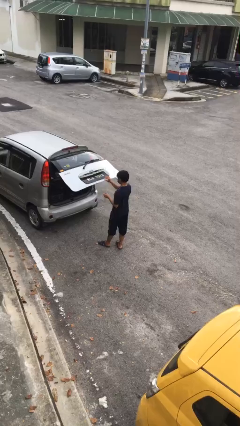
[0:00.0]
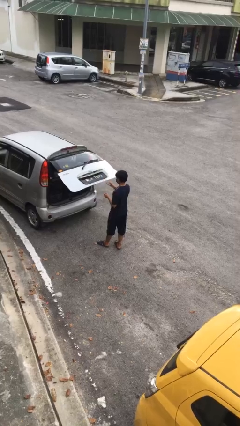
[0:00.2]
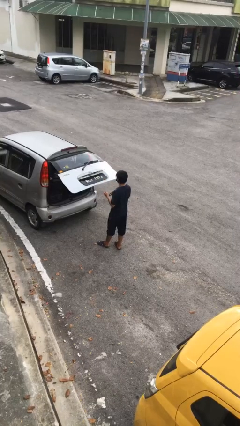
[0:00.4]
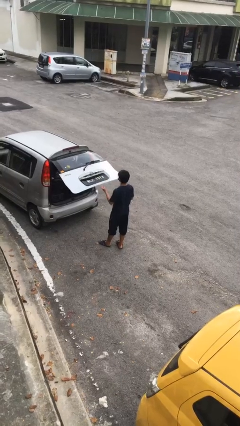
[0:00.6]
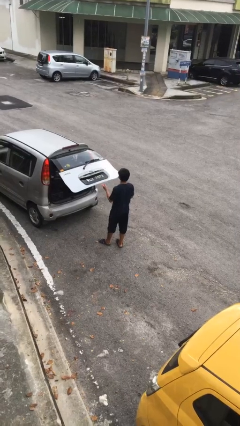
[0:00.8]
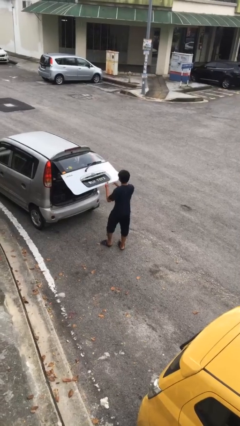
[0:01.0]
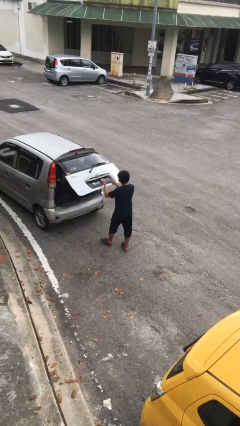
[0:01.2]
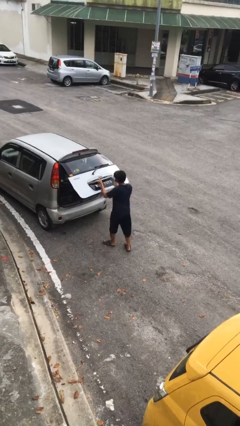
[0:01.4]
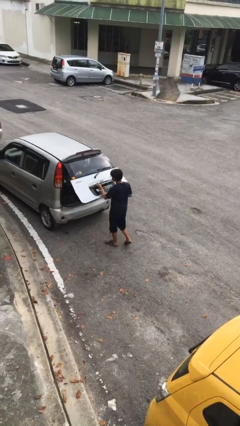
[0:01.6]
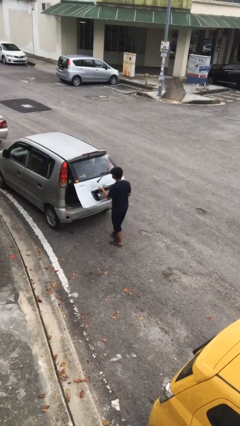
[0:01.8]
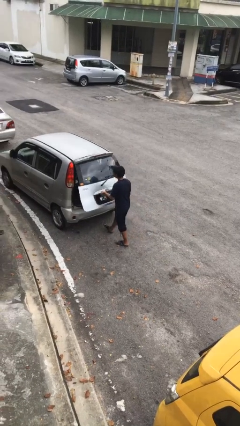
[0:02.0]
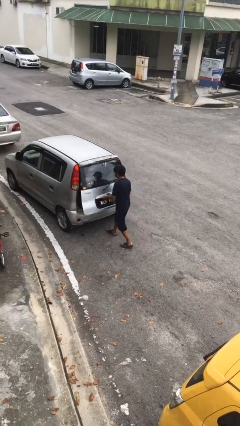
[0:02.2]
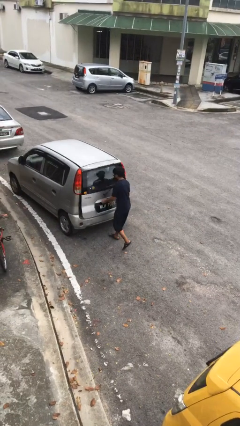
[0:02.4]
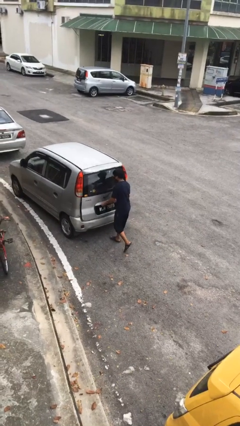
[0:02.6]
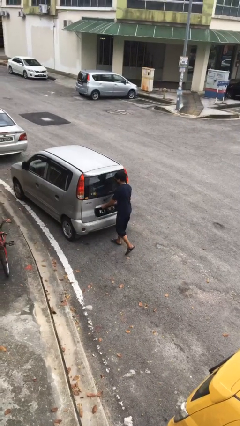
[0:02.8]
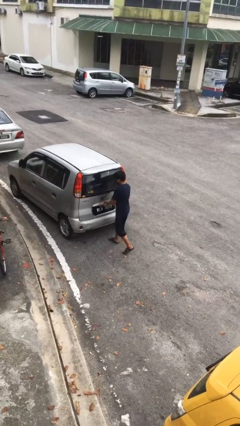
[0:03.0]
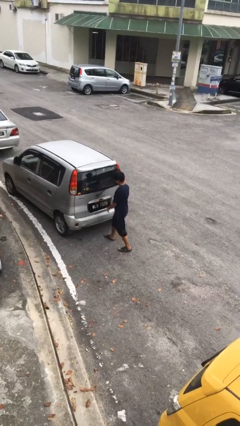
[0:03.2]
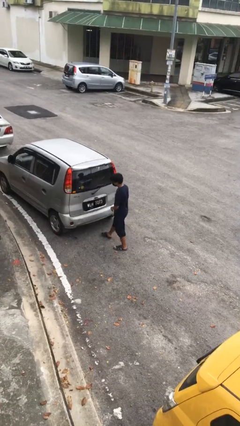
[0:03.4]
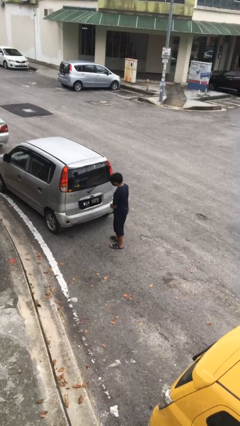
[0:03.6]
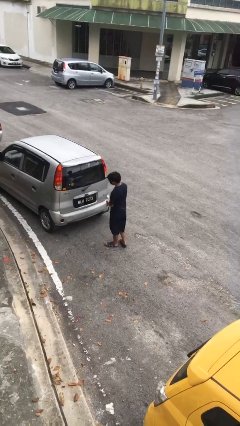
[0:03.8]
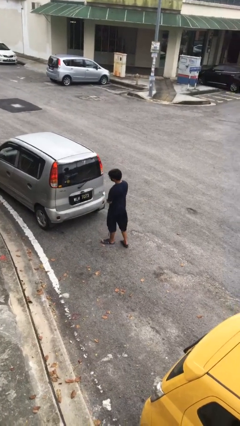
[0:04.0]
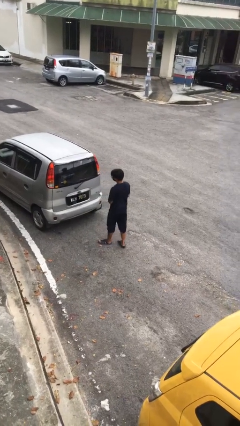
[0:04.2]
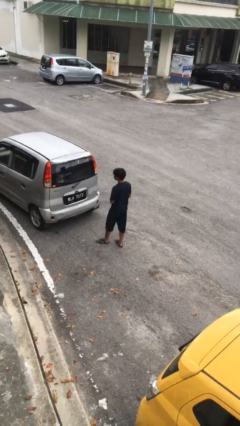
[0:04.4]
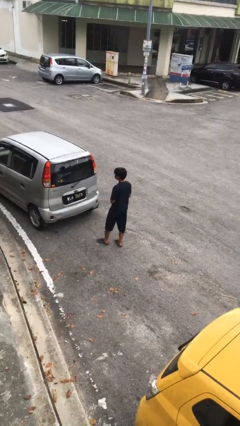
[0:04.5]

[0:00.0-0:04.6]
person closes car trunk

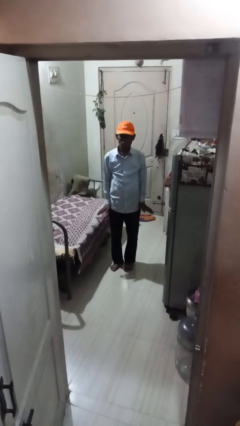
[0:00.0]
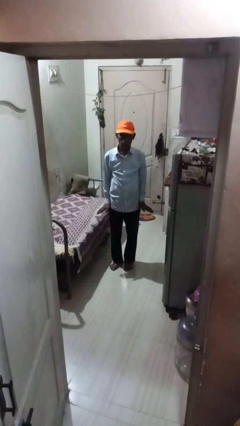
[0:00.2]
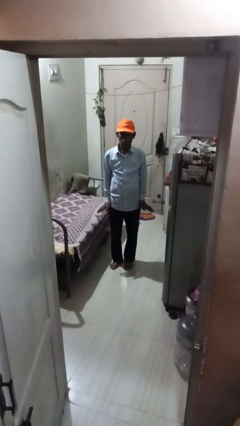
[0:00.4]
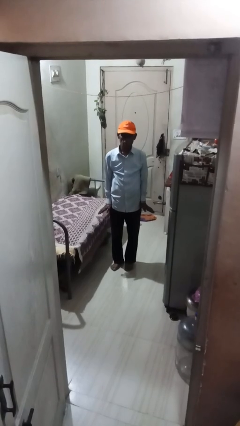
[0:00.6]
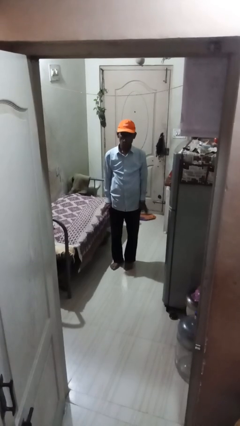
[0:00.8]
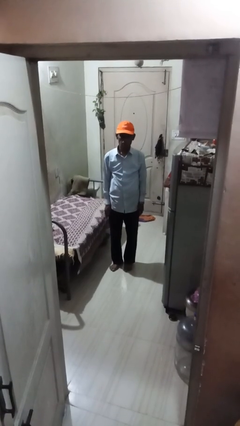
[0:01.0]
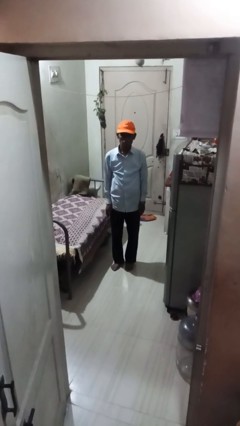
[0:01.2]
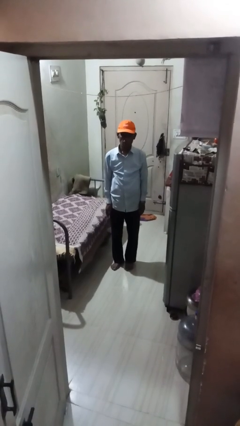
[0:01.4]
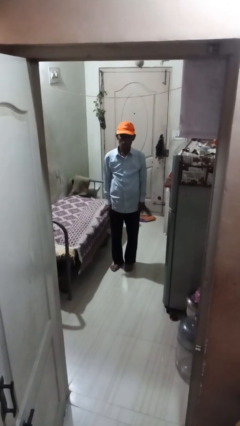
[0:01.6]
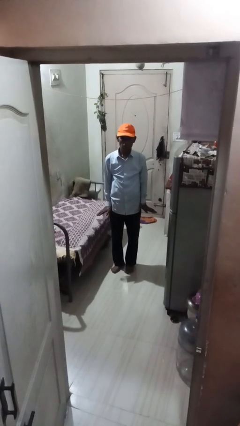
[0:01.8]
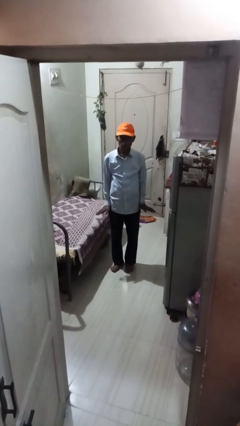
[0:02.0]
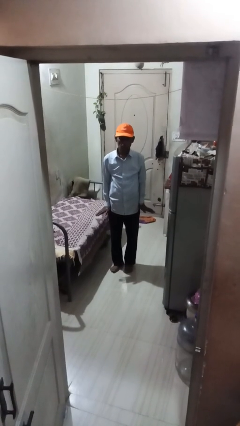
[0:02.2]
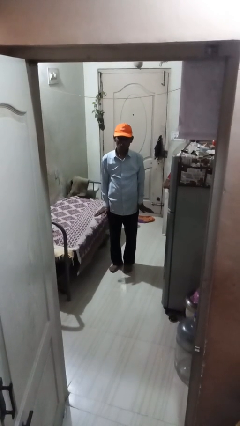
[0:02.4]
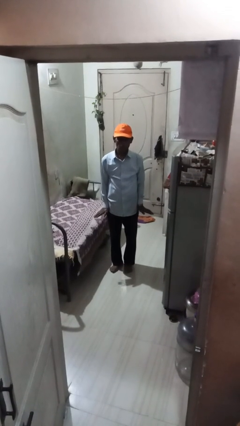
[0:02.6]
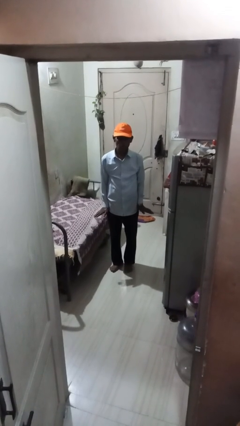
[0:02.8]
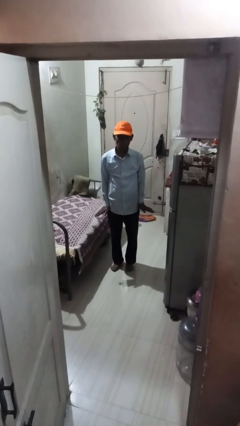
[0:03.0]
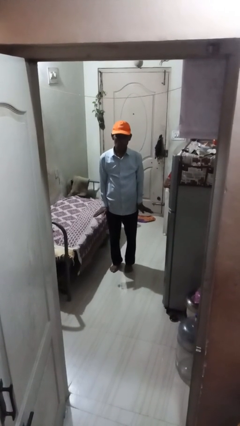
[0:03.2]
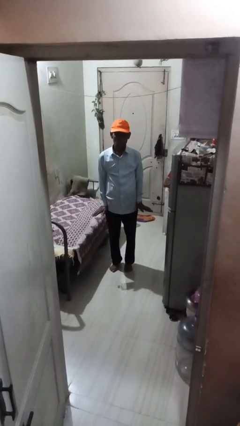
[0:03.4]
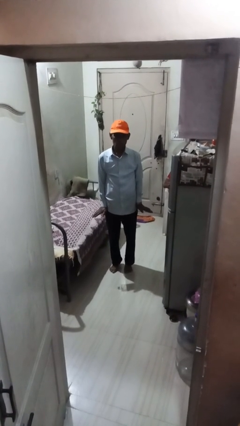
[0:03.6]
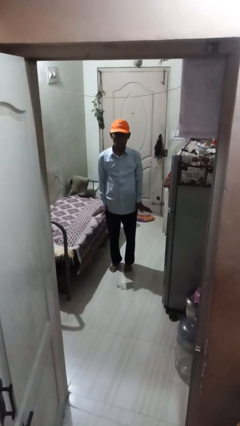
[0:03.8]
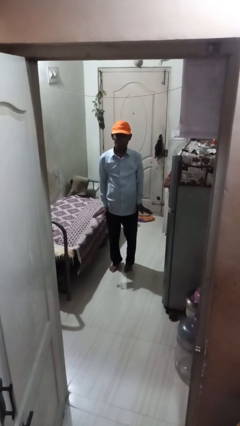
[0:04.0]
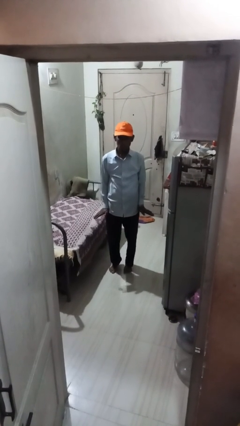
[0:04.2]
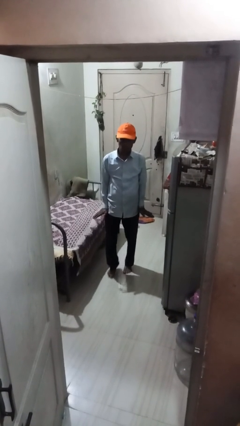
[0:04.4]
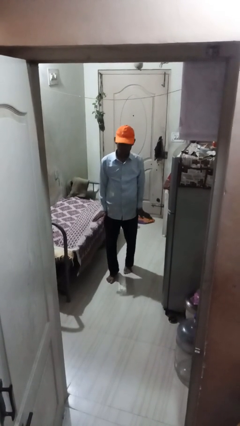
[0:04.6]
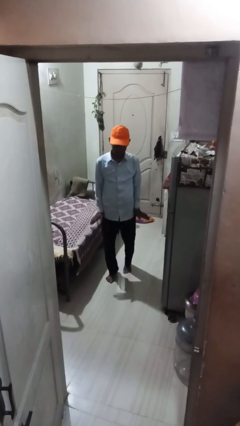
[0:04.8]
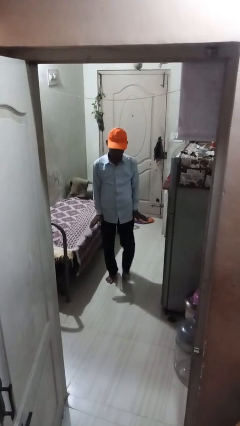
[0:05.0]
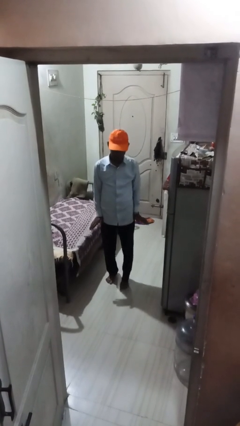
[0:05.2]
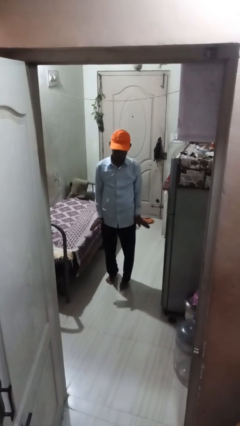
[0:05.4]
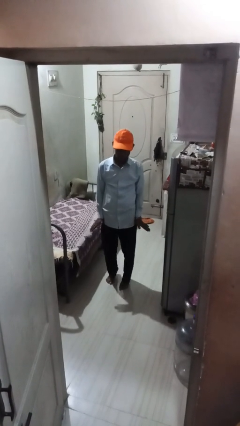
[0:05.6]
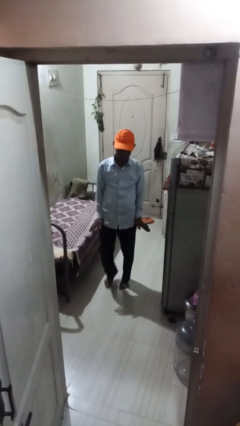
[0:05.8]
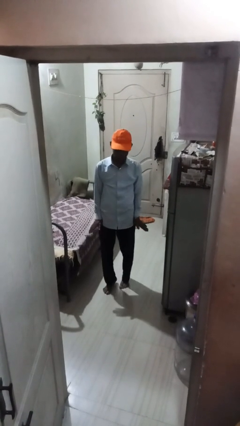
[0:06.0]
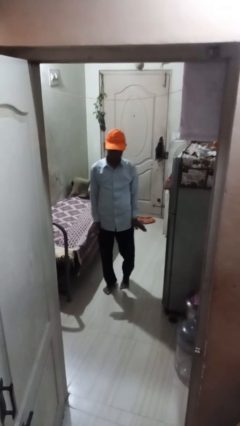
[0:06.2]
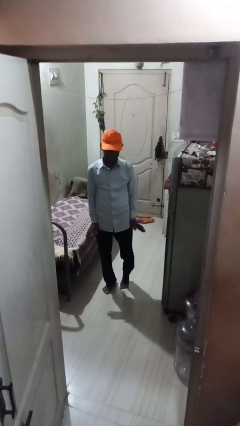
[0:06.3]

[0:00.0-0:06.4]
person walks tiptoe

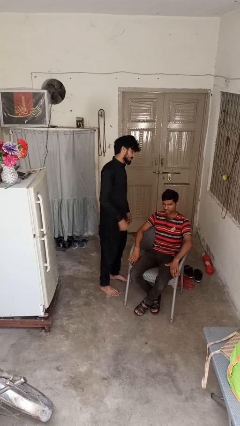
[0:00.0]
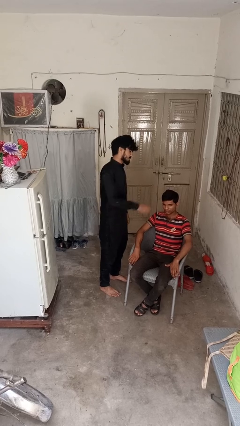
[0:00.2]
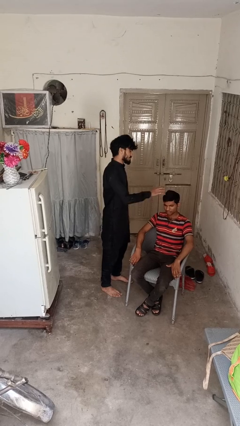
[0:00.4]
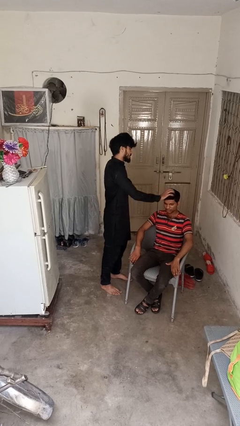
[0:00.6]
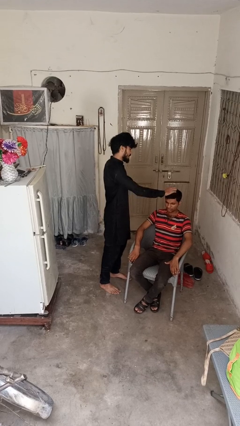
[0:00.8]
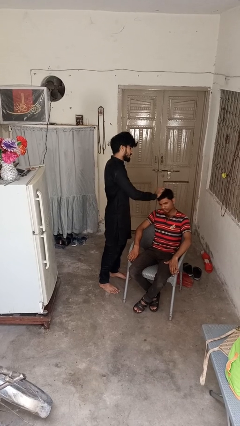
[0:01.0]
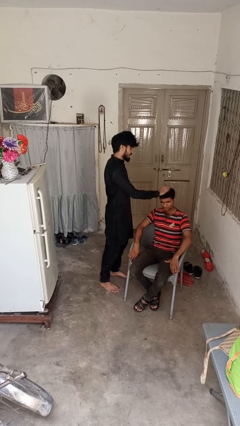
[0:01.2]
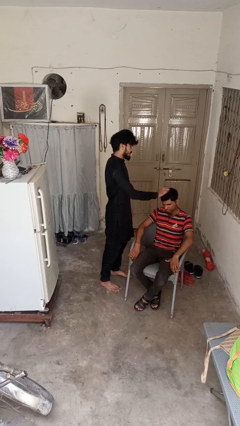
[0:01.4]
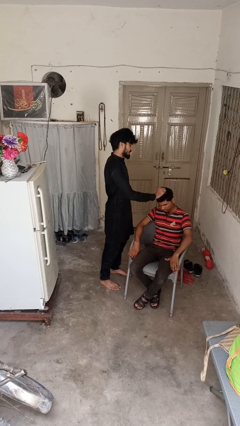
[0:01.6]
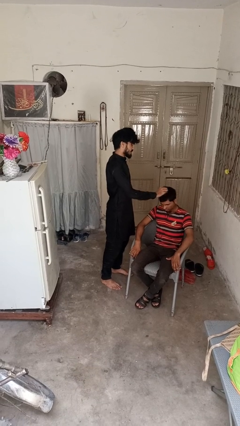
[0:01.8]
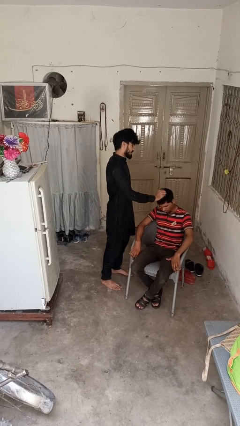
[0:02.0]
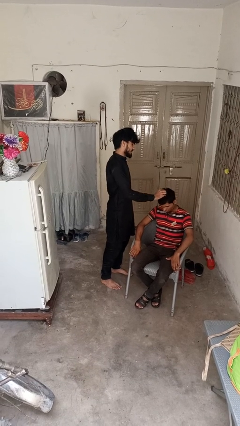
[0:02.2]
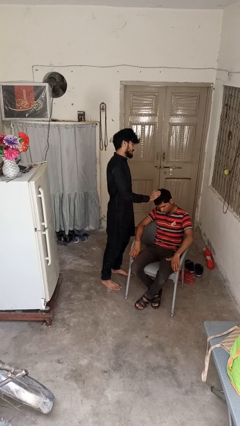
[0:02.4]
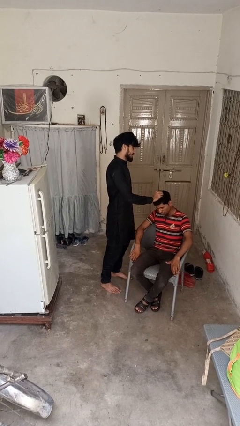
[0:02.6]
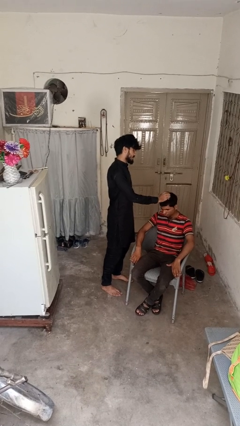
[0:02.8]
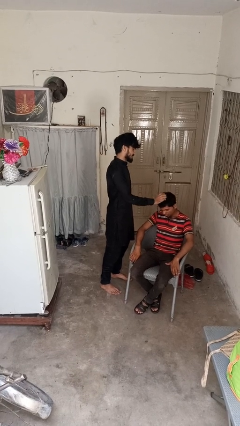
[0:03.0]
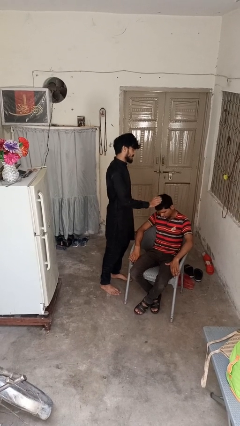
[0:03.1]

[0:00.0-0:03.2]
person grabs person by hair

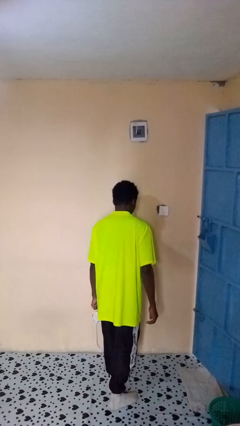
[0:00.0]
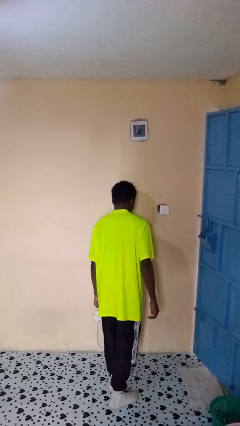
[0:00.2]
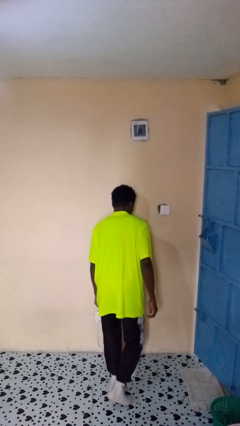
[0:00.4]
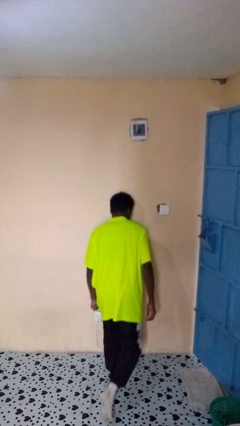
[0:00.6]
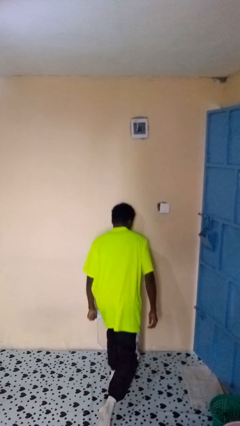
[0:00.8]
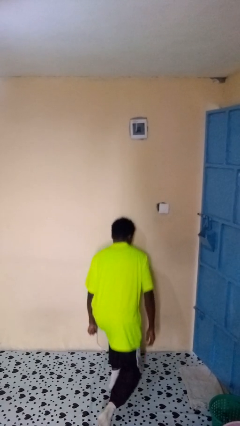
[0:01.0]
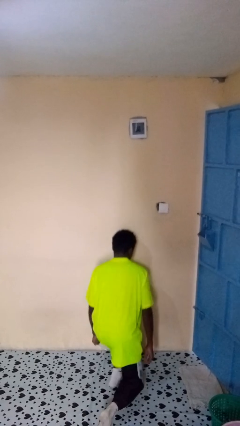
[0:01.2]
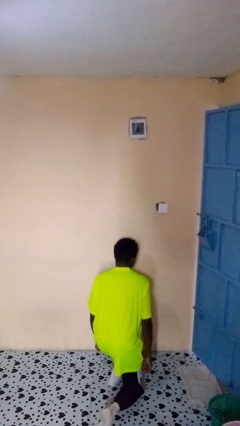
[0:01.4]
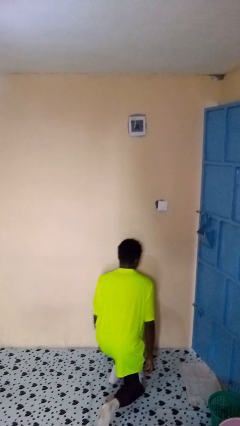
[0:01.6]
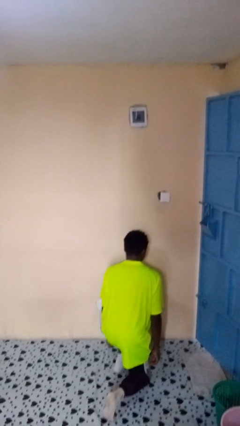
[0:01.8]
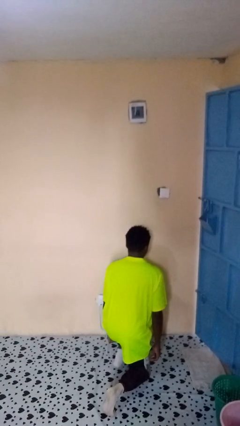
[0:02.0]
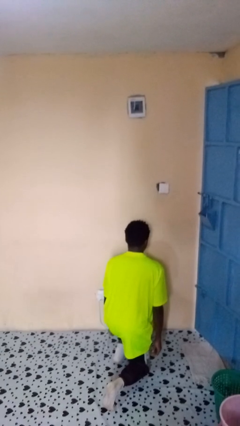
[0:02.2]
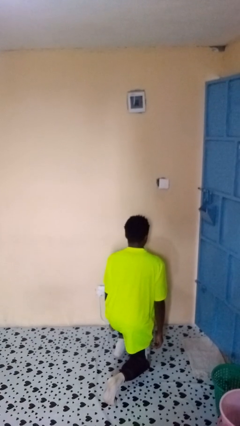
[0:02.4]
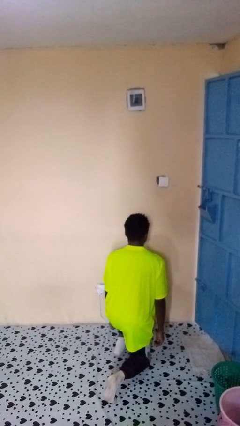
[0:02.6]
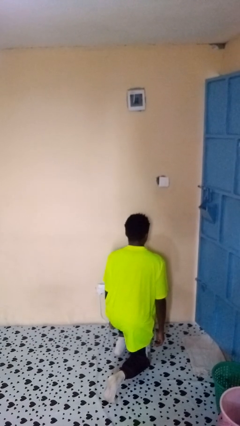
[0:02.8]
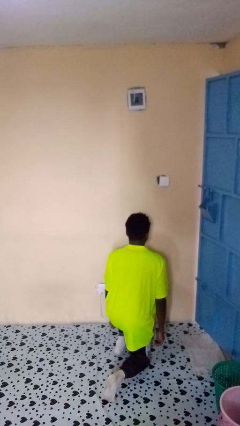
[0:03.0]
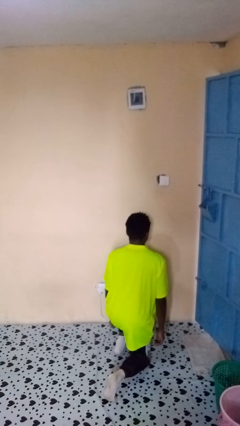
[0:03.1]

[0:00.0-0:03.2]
person kneels

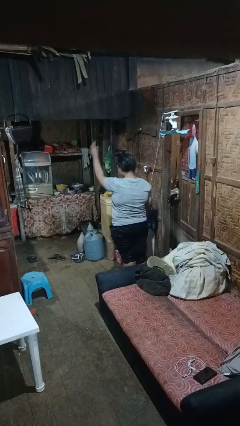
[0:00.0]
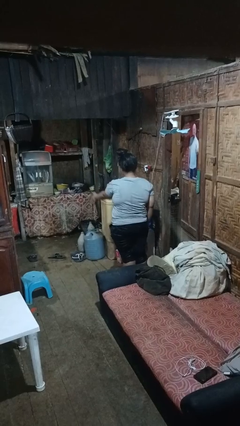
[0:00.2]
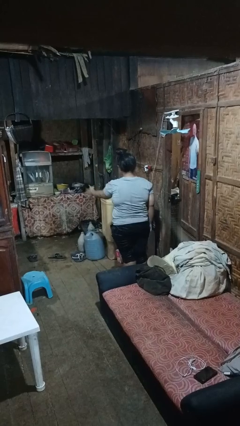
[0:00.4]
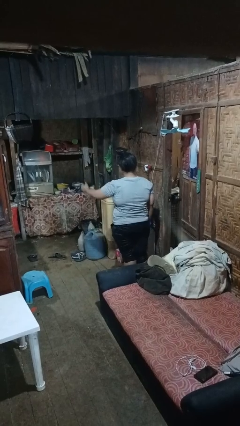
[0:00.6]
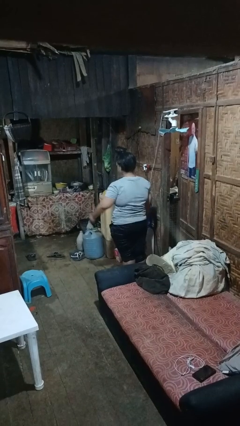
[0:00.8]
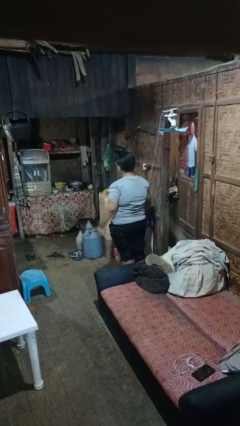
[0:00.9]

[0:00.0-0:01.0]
person karate chop
